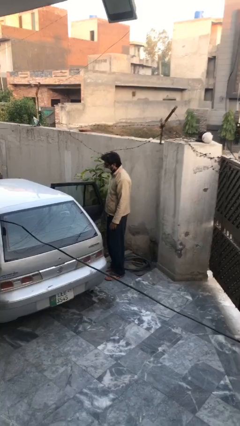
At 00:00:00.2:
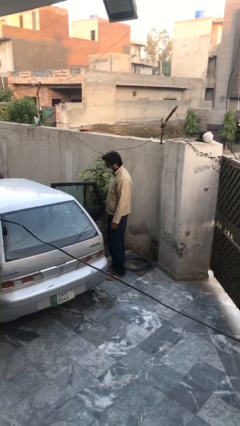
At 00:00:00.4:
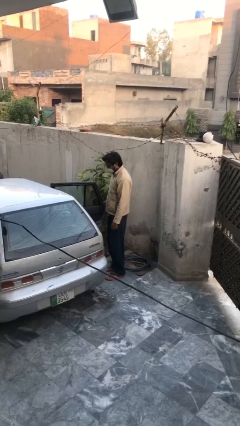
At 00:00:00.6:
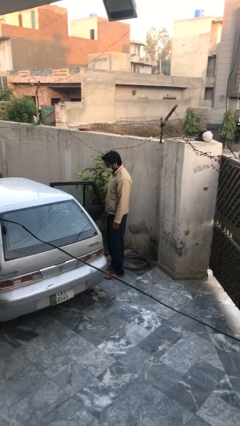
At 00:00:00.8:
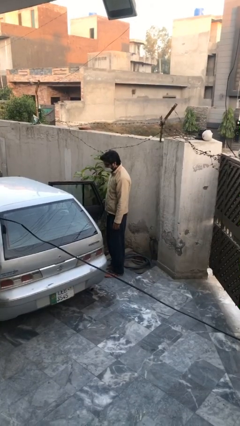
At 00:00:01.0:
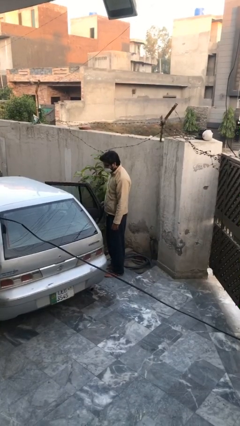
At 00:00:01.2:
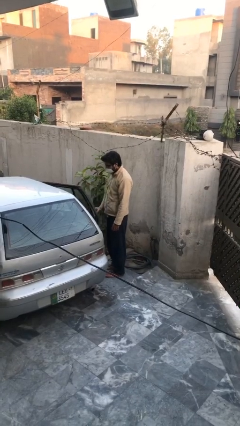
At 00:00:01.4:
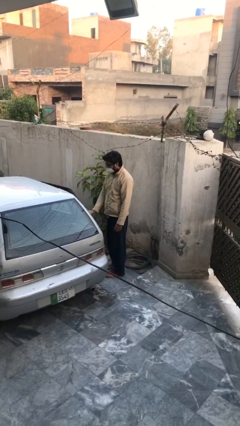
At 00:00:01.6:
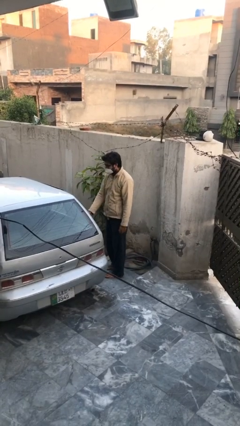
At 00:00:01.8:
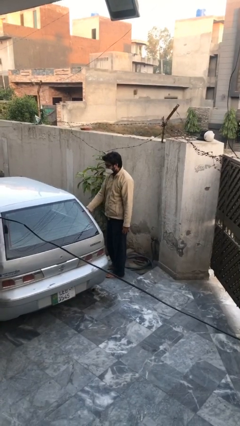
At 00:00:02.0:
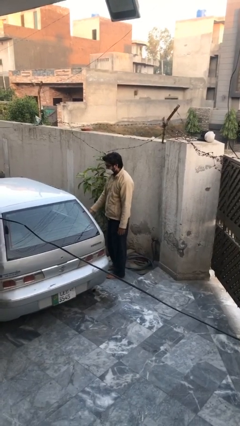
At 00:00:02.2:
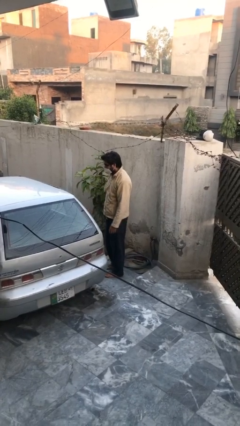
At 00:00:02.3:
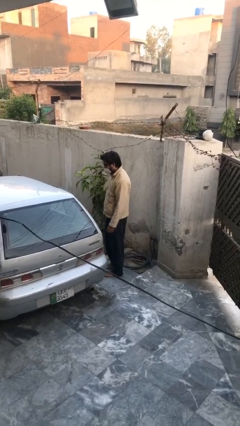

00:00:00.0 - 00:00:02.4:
person closes car door

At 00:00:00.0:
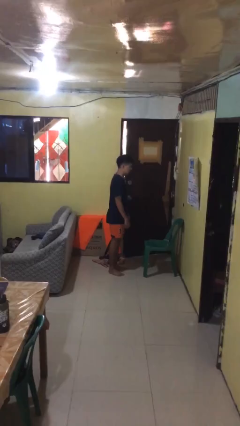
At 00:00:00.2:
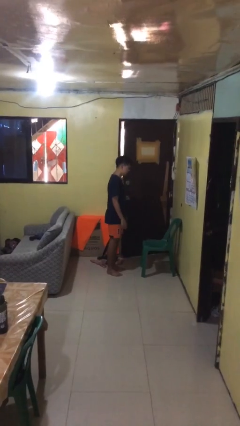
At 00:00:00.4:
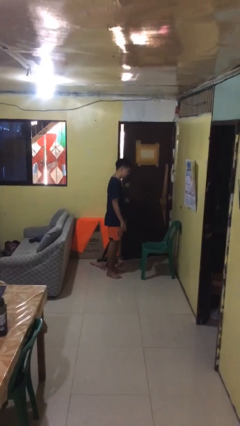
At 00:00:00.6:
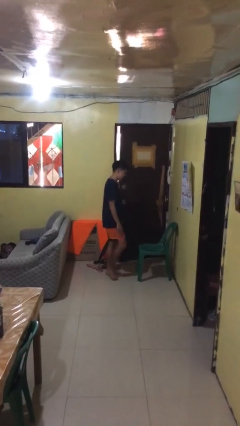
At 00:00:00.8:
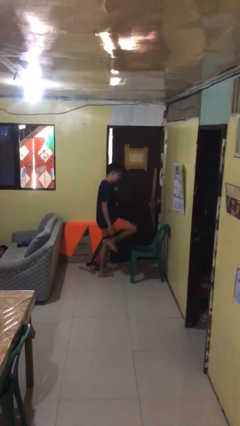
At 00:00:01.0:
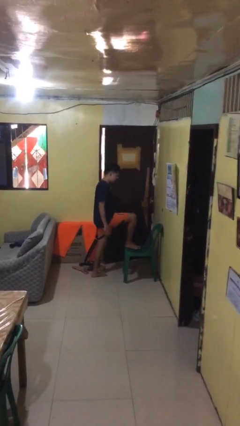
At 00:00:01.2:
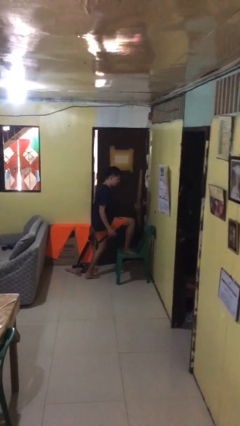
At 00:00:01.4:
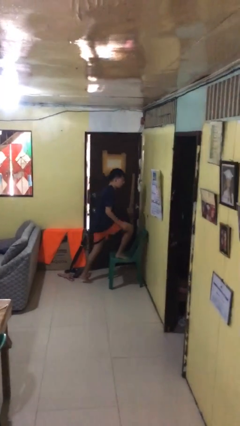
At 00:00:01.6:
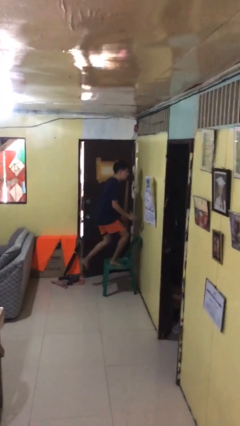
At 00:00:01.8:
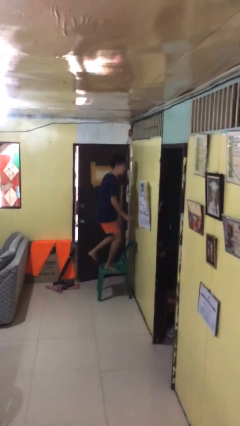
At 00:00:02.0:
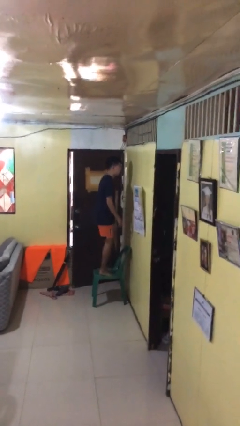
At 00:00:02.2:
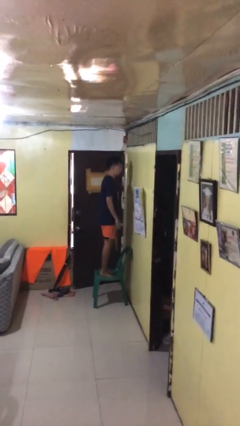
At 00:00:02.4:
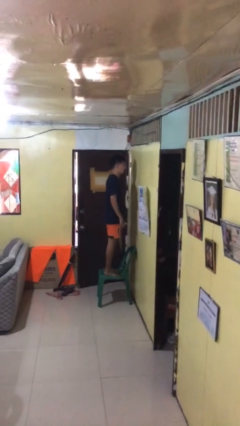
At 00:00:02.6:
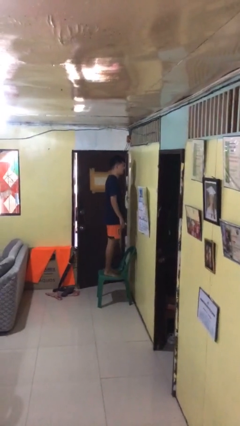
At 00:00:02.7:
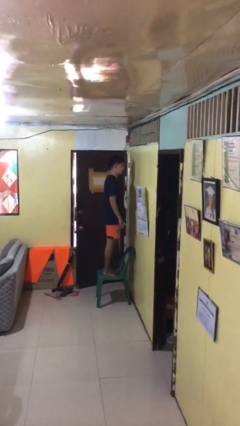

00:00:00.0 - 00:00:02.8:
person climbs on chair

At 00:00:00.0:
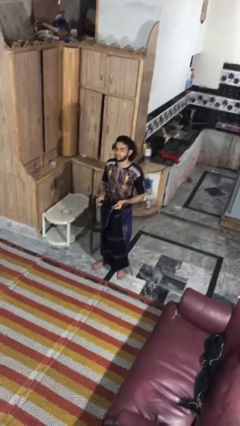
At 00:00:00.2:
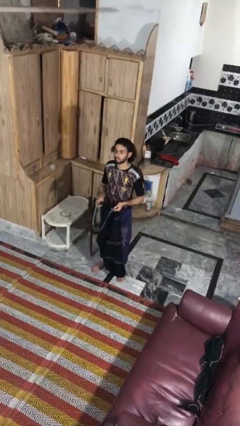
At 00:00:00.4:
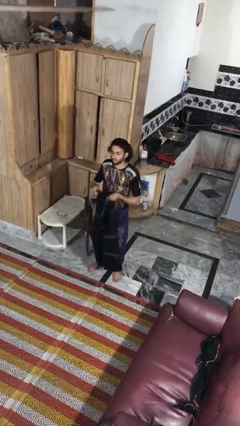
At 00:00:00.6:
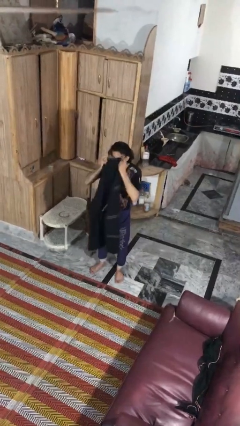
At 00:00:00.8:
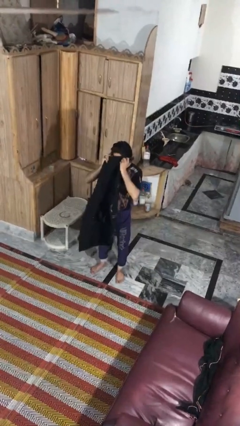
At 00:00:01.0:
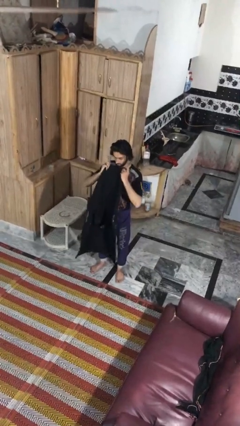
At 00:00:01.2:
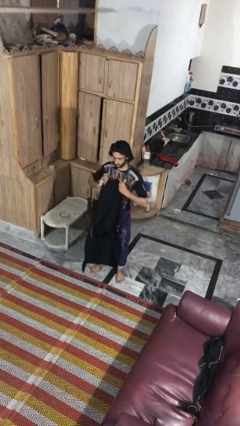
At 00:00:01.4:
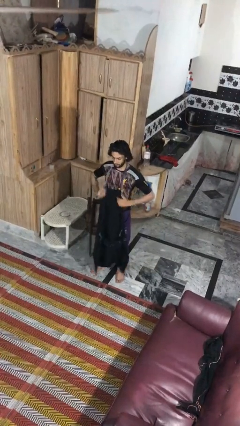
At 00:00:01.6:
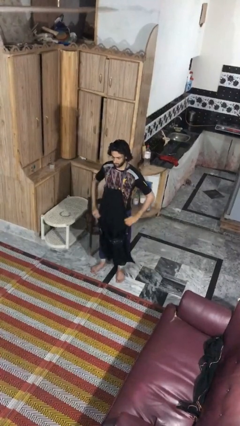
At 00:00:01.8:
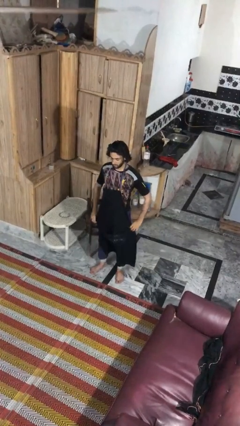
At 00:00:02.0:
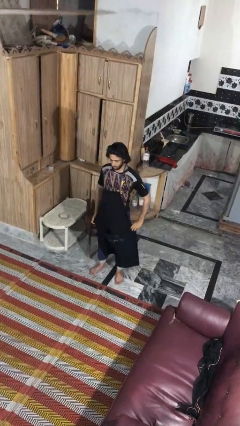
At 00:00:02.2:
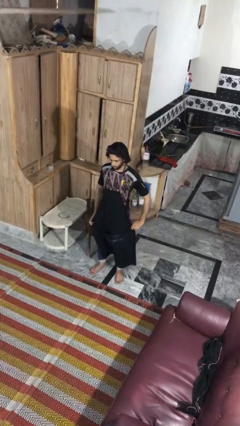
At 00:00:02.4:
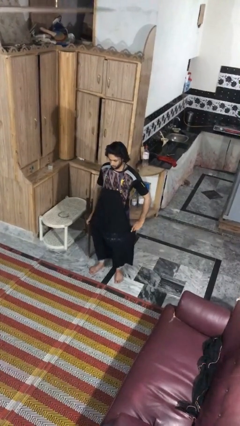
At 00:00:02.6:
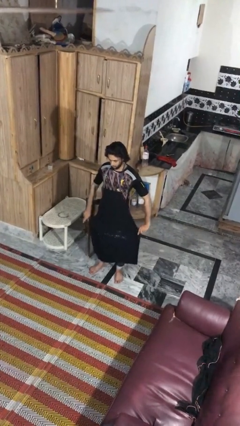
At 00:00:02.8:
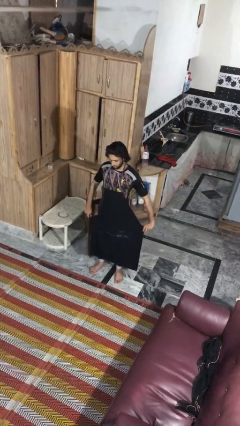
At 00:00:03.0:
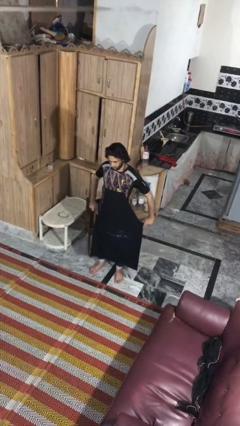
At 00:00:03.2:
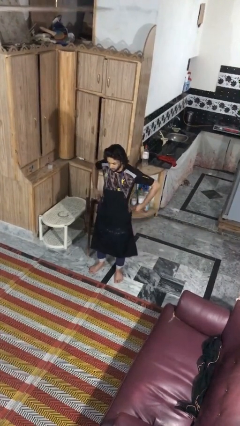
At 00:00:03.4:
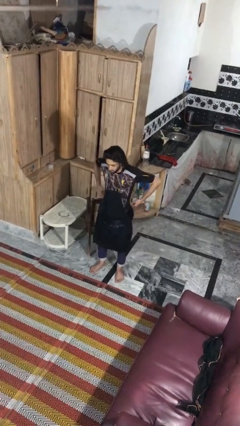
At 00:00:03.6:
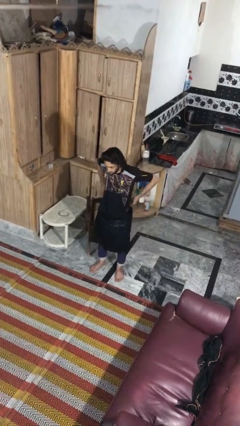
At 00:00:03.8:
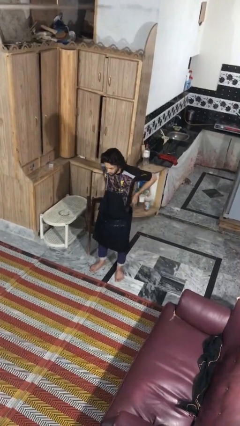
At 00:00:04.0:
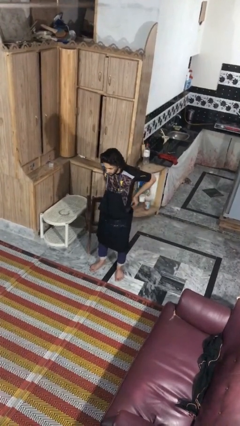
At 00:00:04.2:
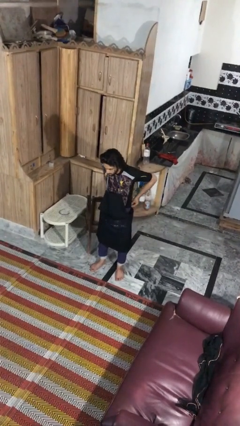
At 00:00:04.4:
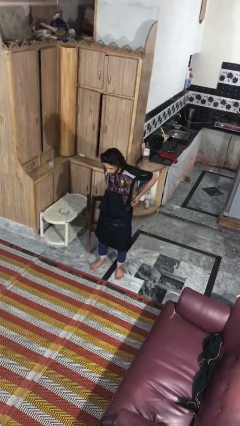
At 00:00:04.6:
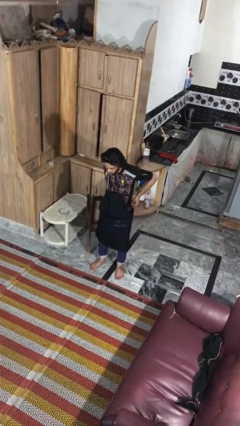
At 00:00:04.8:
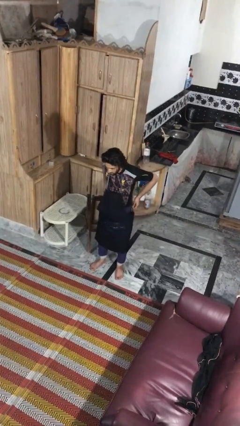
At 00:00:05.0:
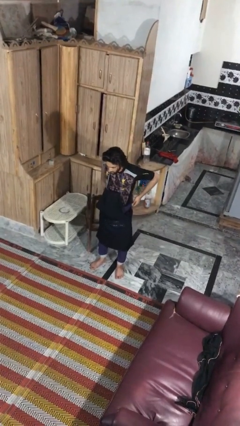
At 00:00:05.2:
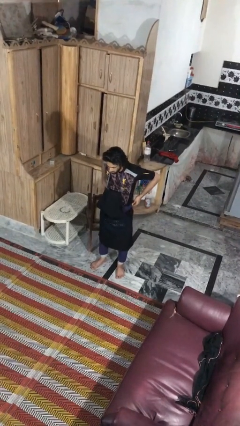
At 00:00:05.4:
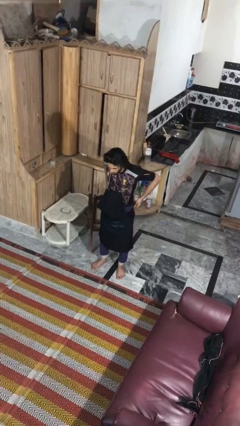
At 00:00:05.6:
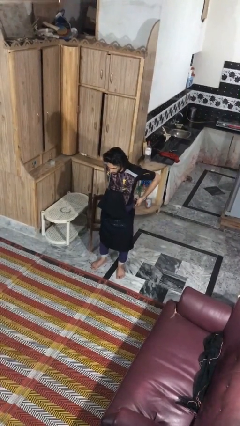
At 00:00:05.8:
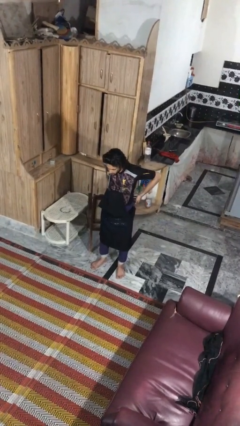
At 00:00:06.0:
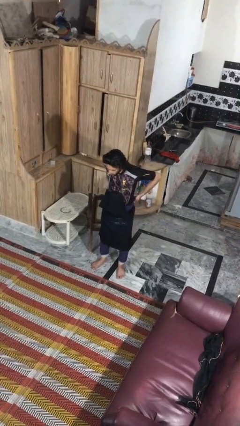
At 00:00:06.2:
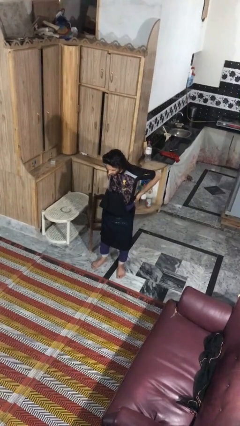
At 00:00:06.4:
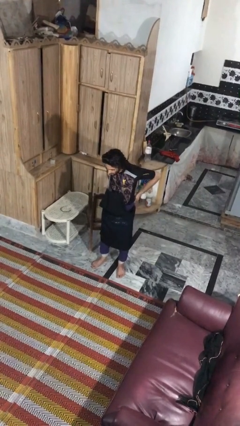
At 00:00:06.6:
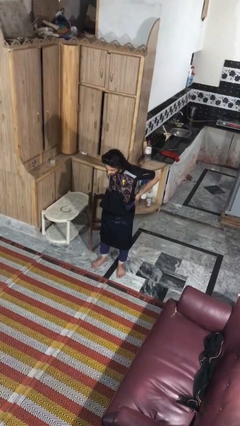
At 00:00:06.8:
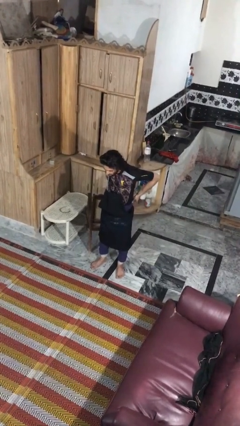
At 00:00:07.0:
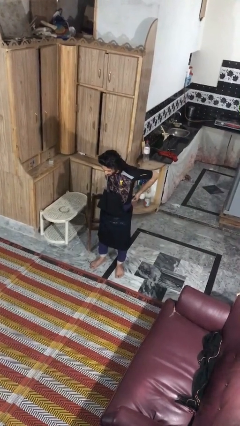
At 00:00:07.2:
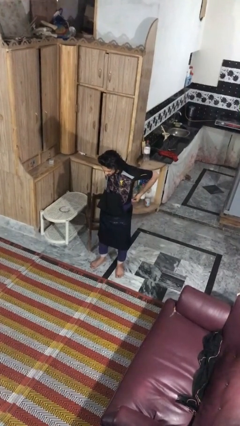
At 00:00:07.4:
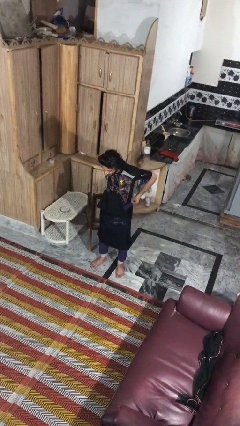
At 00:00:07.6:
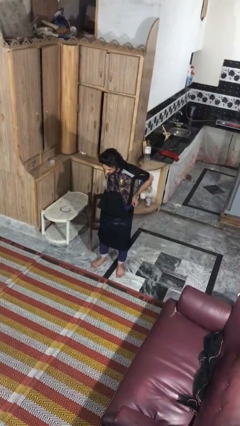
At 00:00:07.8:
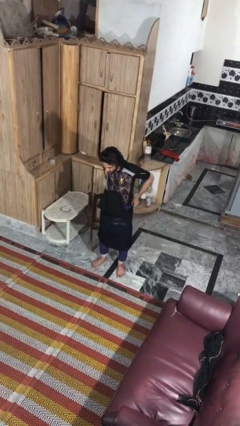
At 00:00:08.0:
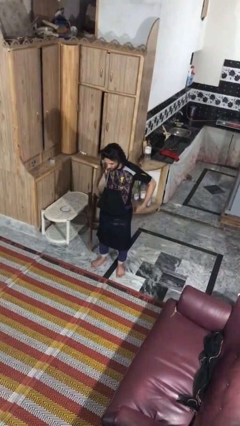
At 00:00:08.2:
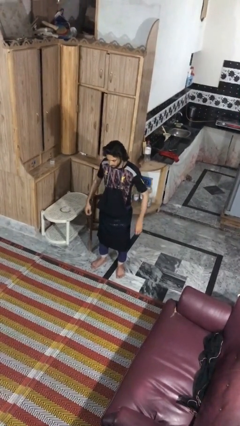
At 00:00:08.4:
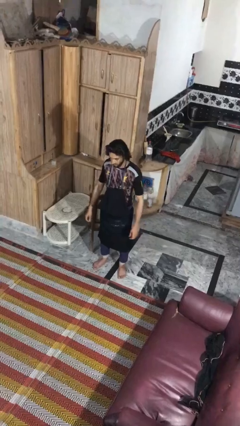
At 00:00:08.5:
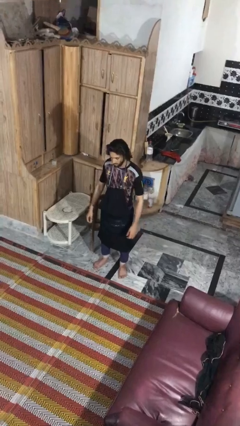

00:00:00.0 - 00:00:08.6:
person puts on apron

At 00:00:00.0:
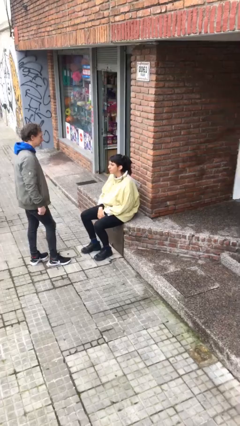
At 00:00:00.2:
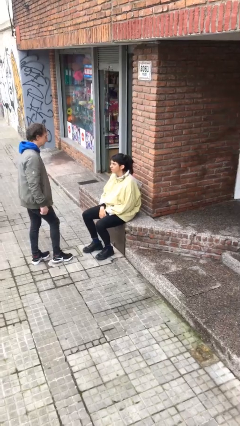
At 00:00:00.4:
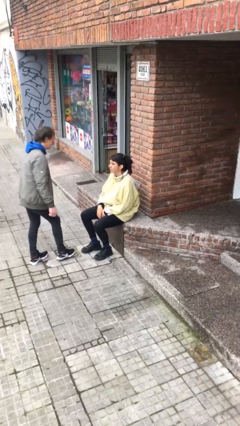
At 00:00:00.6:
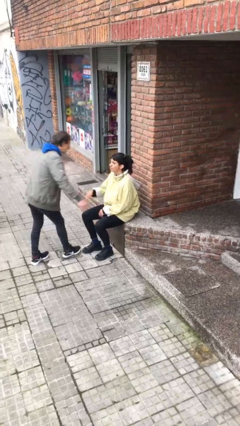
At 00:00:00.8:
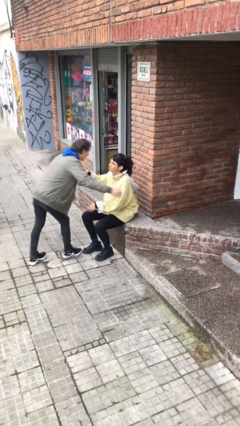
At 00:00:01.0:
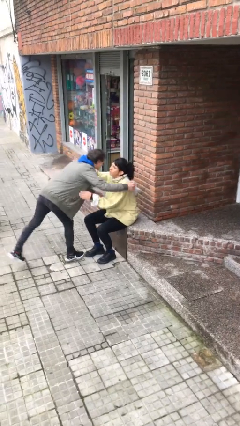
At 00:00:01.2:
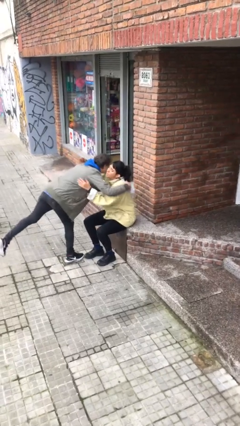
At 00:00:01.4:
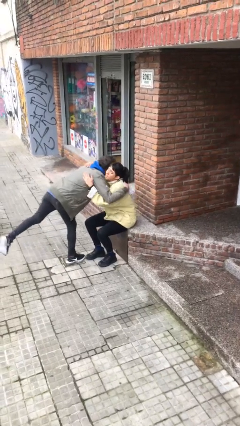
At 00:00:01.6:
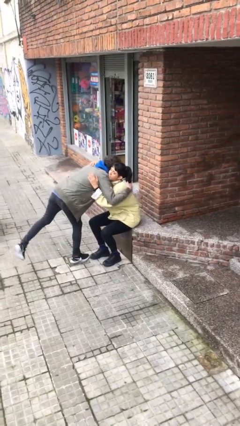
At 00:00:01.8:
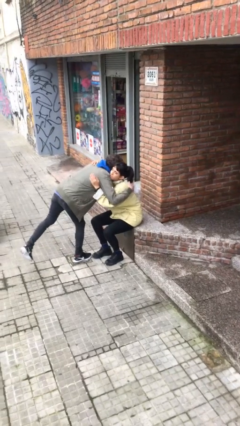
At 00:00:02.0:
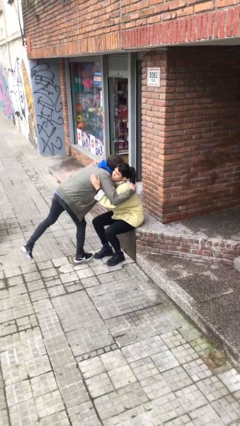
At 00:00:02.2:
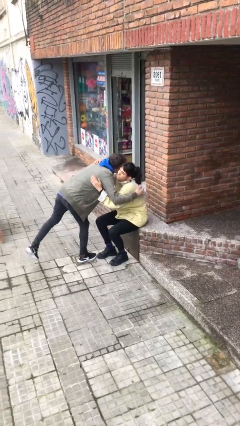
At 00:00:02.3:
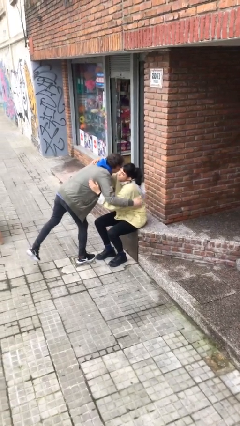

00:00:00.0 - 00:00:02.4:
person embraces person

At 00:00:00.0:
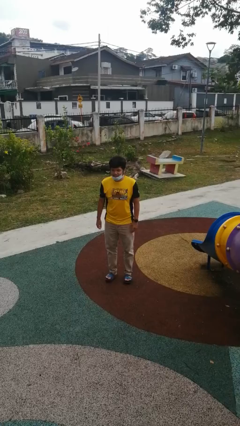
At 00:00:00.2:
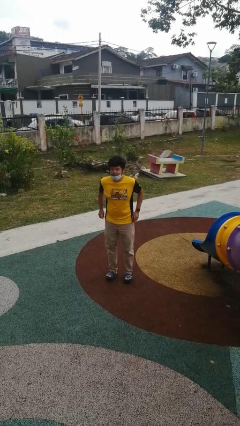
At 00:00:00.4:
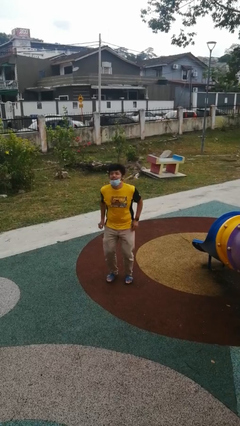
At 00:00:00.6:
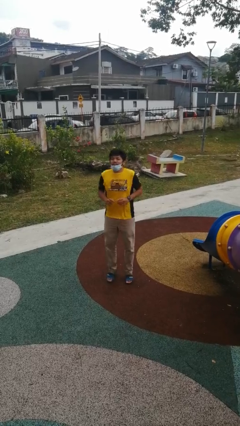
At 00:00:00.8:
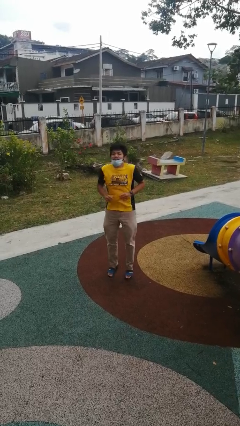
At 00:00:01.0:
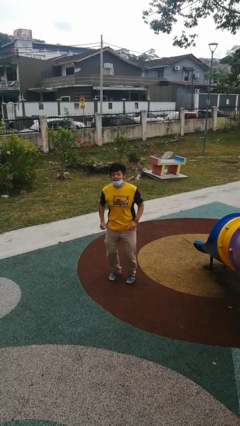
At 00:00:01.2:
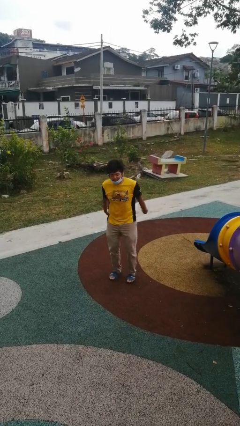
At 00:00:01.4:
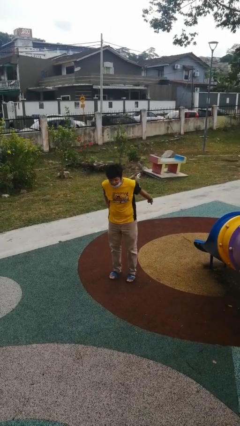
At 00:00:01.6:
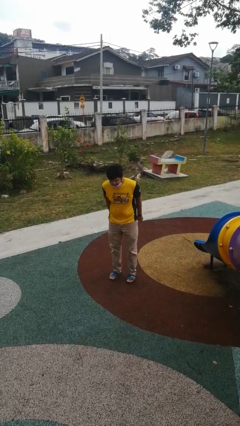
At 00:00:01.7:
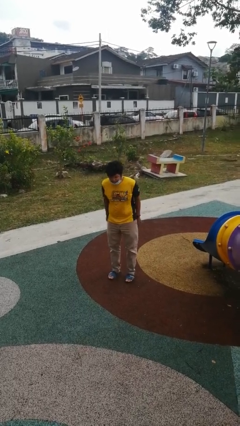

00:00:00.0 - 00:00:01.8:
person jumps
